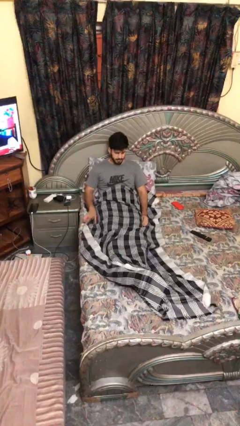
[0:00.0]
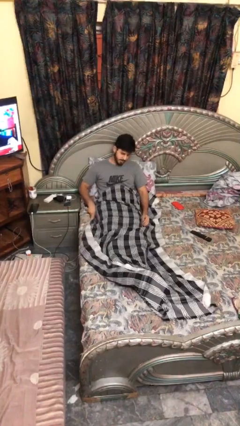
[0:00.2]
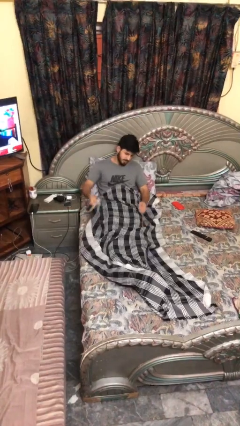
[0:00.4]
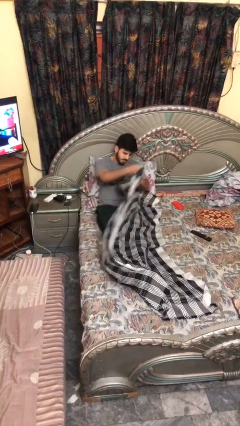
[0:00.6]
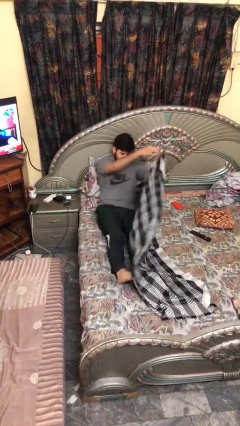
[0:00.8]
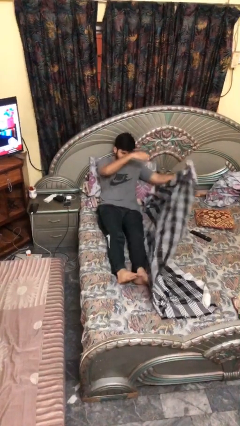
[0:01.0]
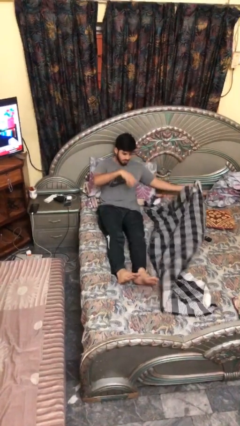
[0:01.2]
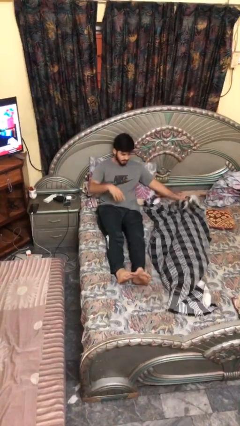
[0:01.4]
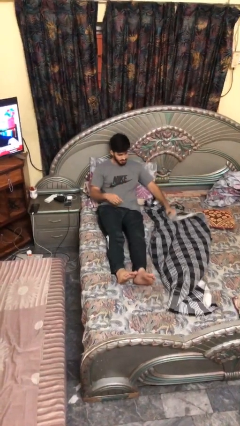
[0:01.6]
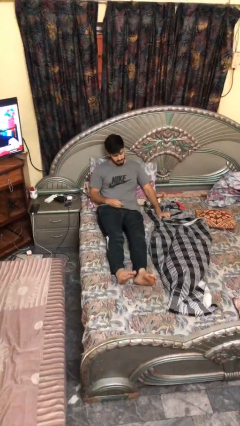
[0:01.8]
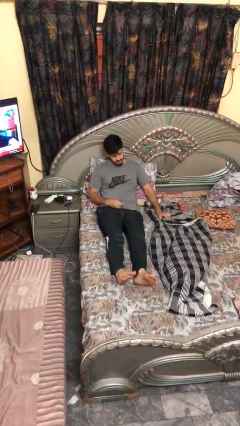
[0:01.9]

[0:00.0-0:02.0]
person uncovers with bedsheets

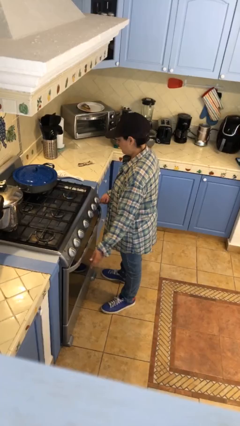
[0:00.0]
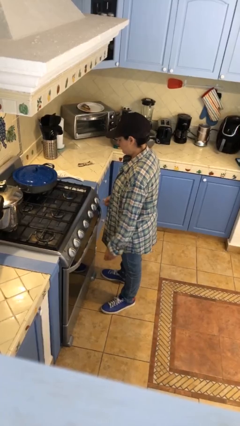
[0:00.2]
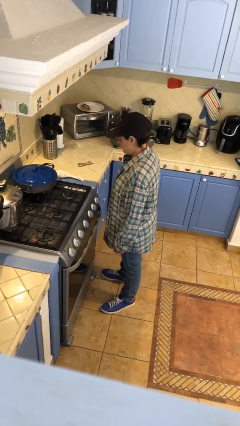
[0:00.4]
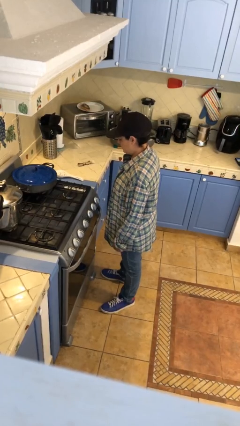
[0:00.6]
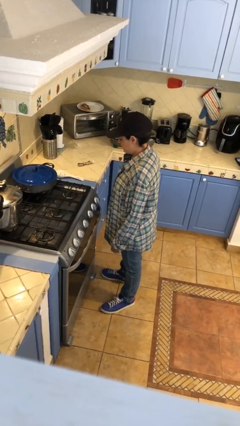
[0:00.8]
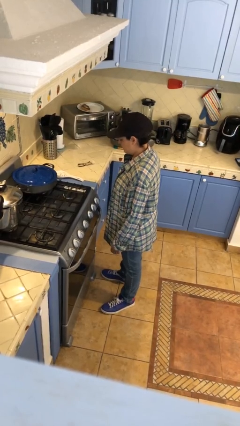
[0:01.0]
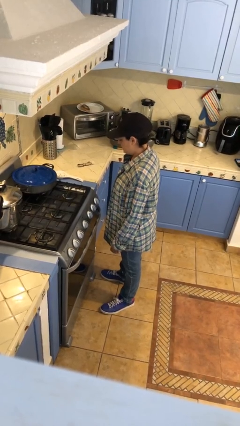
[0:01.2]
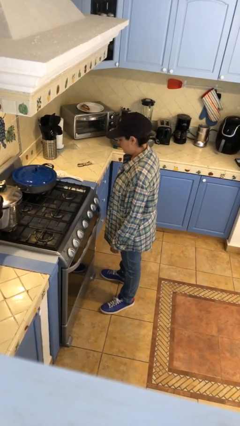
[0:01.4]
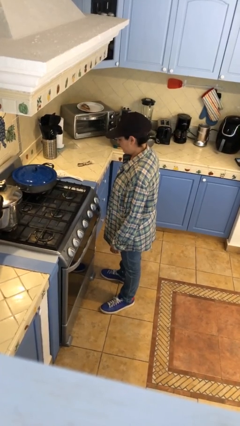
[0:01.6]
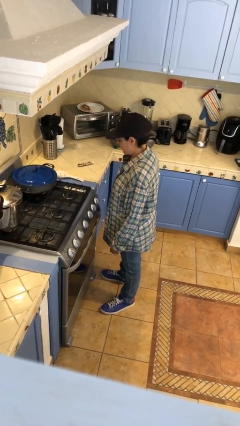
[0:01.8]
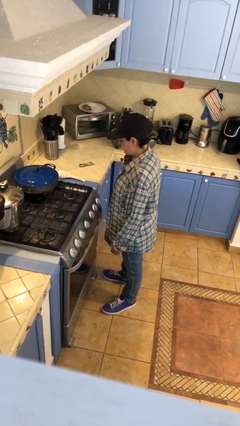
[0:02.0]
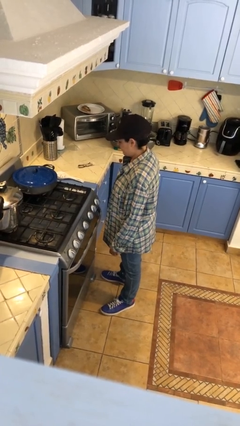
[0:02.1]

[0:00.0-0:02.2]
person turns off stovetop

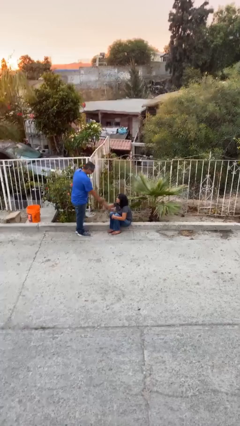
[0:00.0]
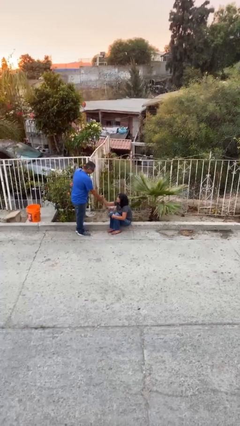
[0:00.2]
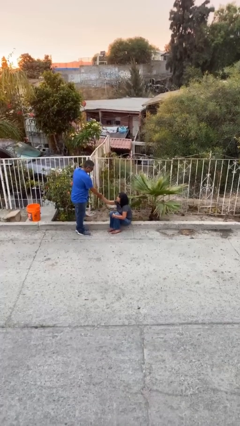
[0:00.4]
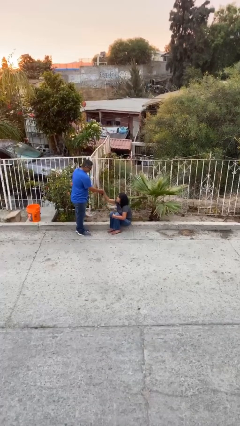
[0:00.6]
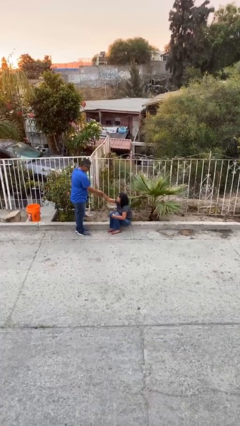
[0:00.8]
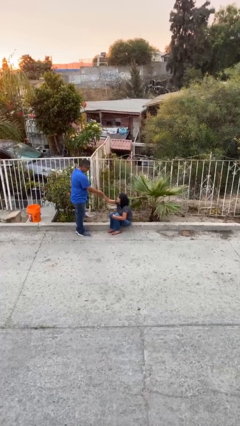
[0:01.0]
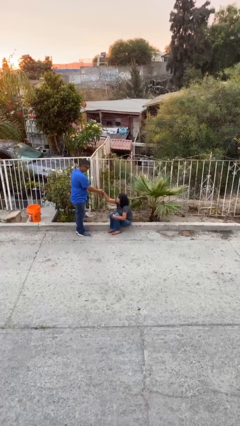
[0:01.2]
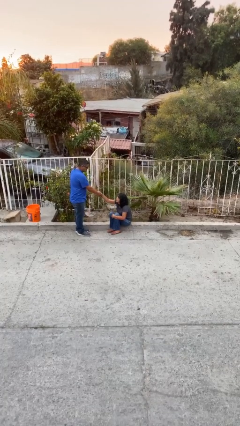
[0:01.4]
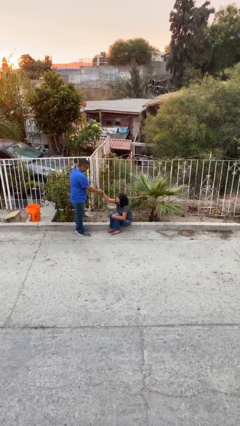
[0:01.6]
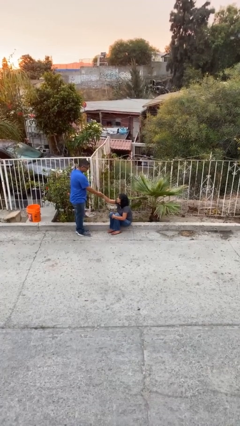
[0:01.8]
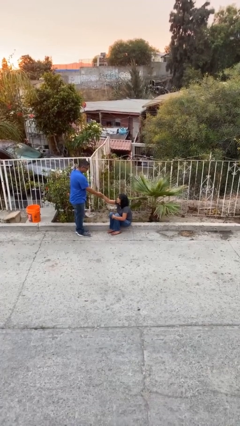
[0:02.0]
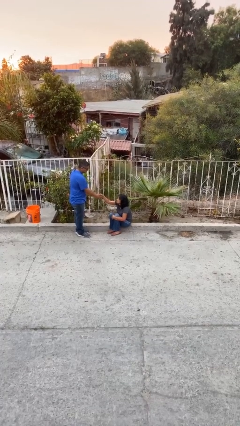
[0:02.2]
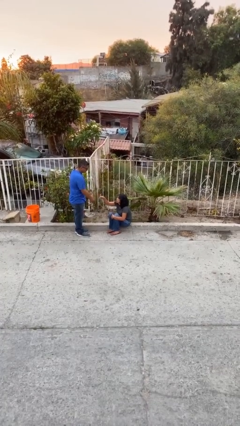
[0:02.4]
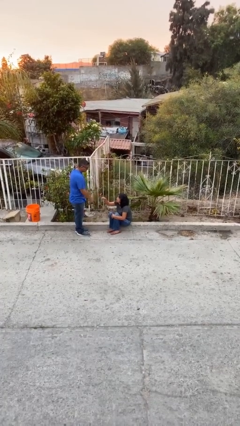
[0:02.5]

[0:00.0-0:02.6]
person shakes hand

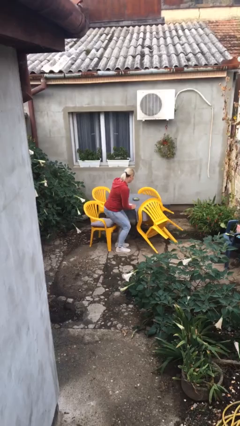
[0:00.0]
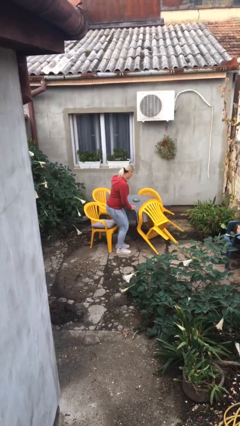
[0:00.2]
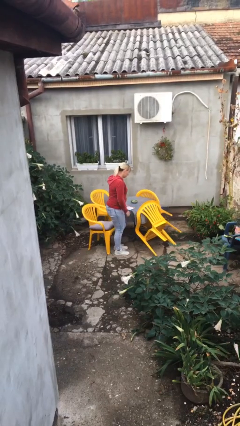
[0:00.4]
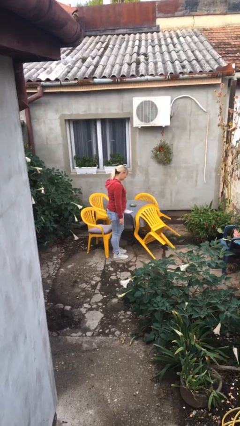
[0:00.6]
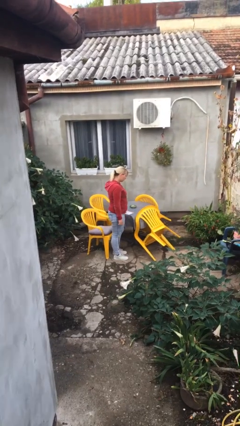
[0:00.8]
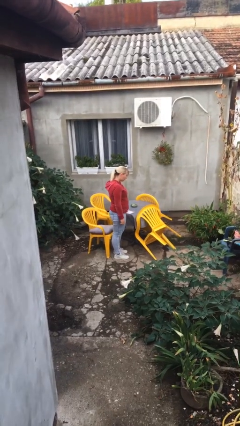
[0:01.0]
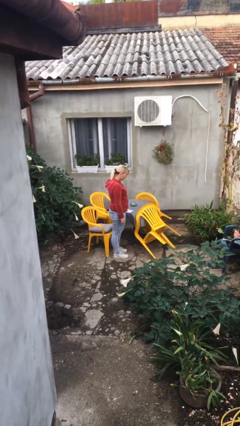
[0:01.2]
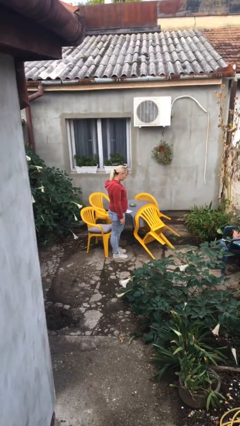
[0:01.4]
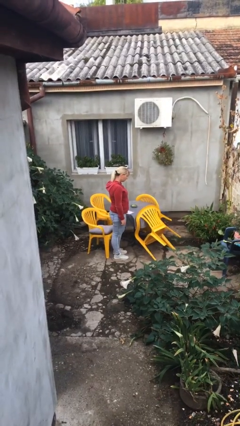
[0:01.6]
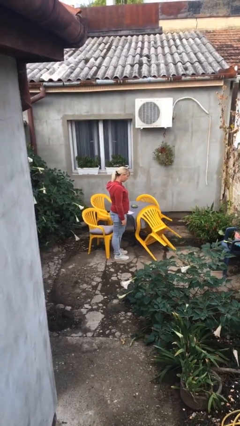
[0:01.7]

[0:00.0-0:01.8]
person stands up

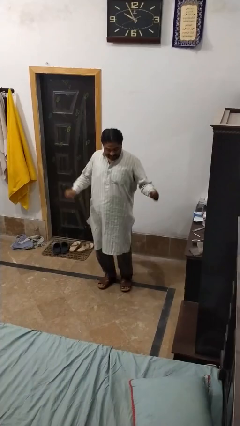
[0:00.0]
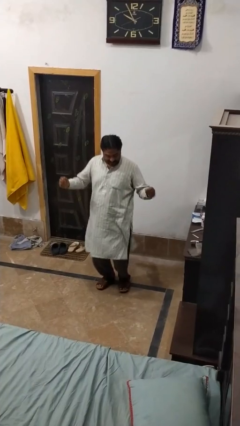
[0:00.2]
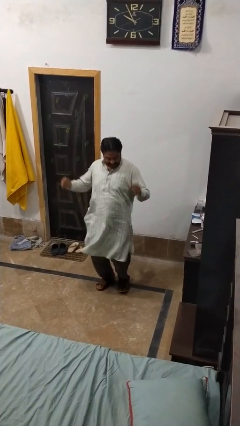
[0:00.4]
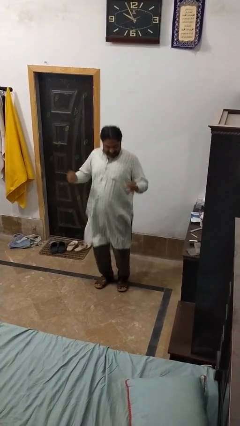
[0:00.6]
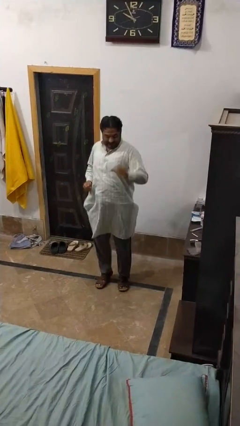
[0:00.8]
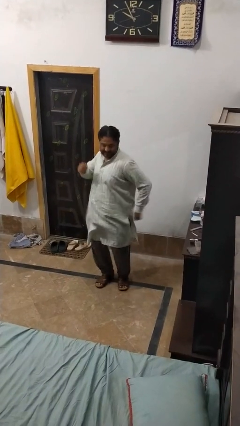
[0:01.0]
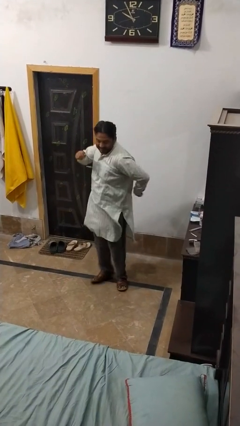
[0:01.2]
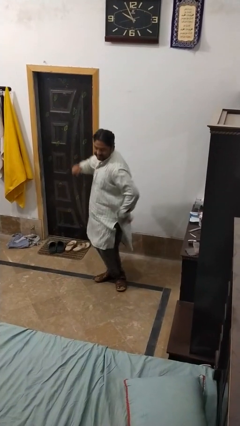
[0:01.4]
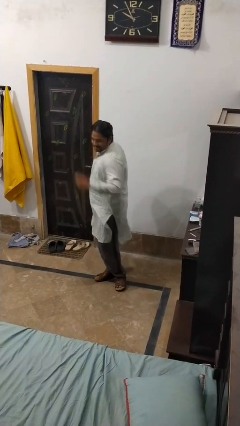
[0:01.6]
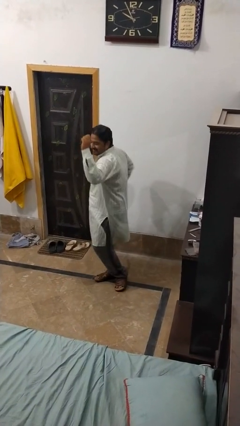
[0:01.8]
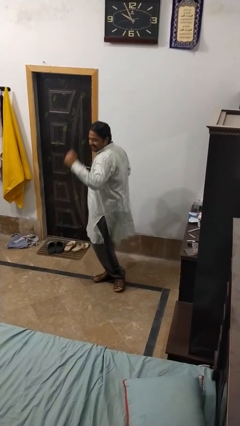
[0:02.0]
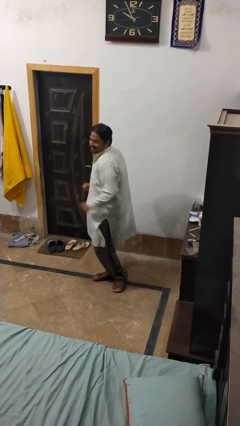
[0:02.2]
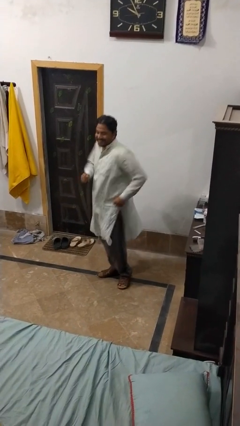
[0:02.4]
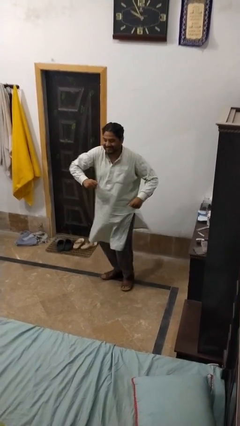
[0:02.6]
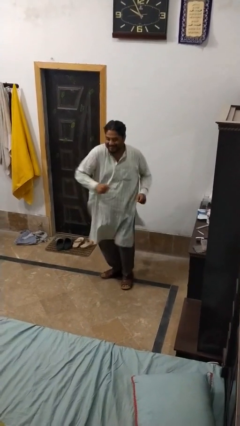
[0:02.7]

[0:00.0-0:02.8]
person dances in place

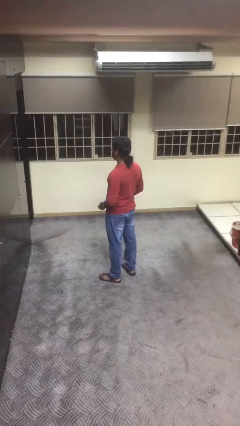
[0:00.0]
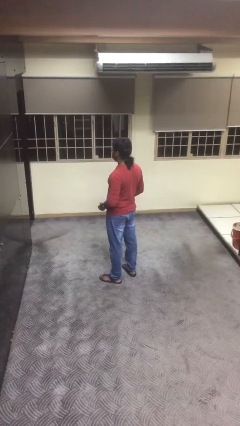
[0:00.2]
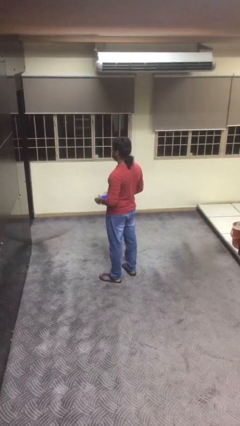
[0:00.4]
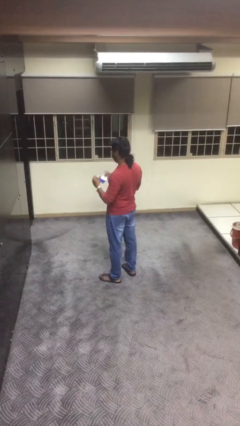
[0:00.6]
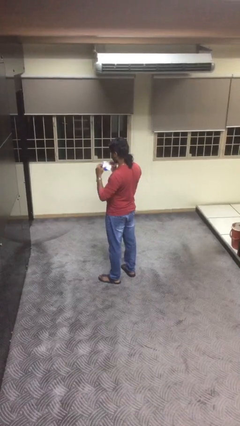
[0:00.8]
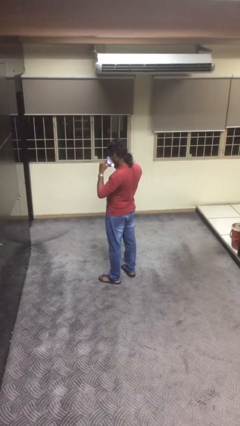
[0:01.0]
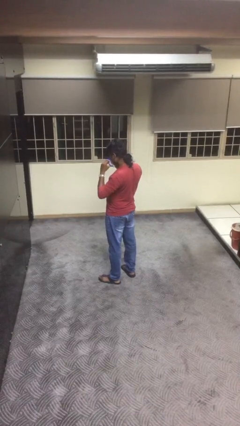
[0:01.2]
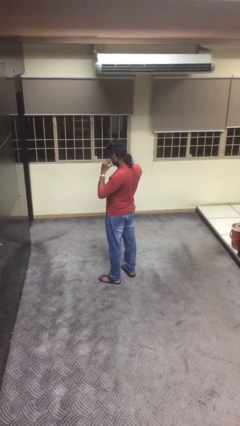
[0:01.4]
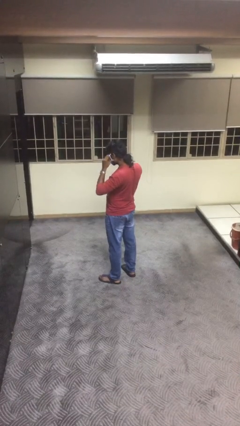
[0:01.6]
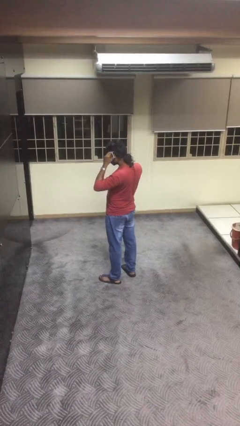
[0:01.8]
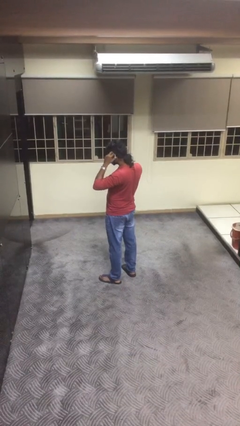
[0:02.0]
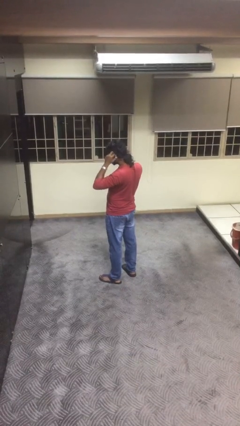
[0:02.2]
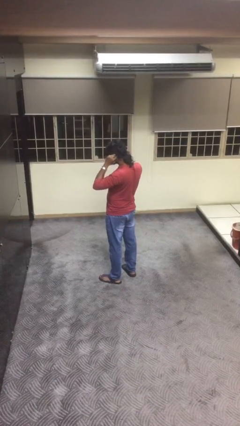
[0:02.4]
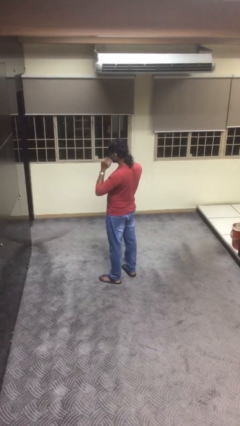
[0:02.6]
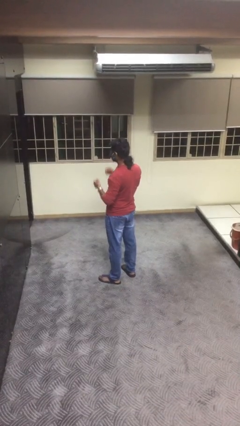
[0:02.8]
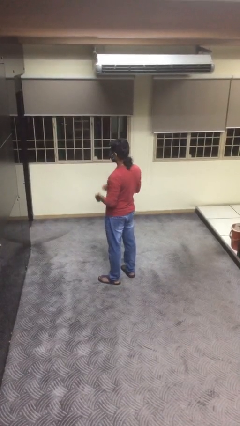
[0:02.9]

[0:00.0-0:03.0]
person puts on facemask

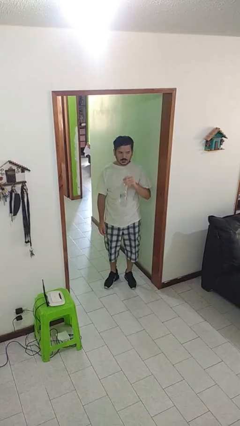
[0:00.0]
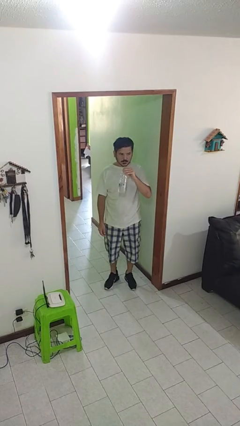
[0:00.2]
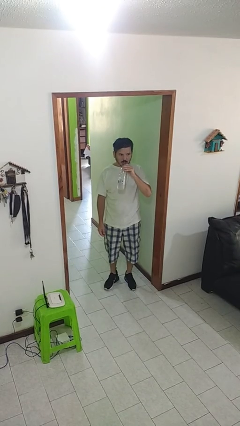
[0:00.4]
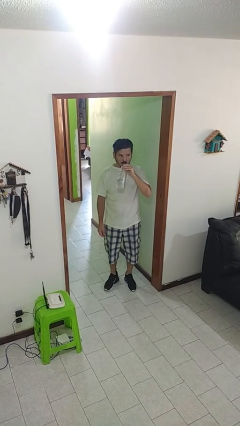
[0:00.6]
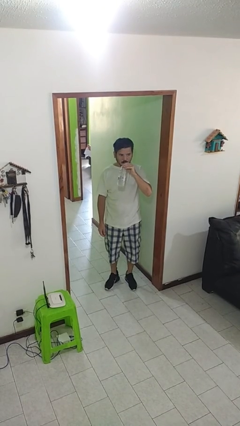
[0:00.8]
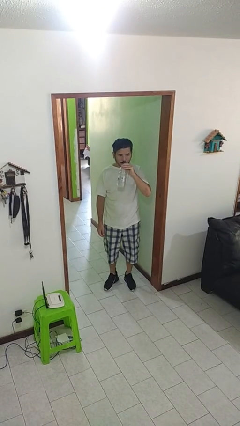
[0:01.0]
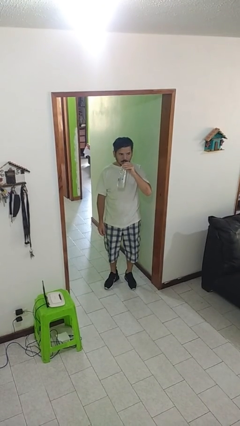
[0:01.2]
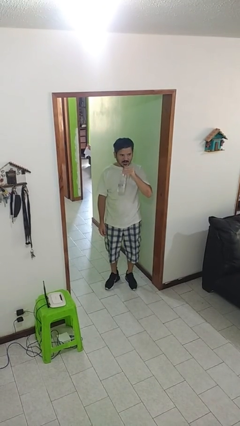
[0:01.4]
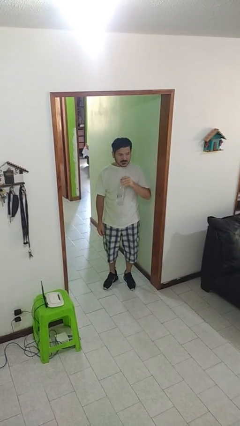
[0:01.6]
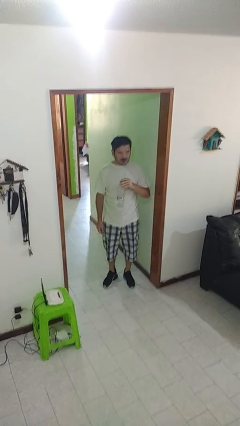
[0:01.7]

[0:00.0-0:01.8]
person drinks from straw

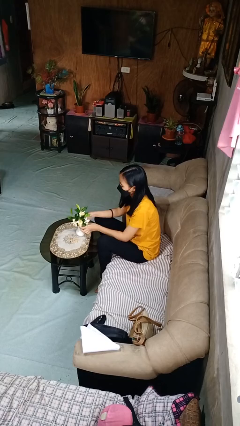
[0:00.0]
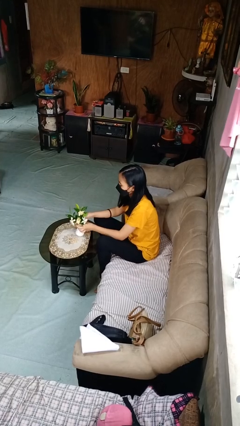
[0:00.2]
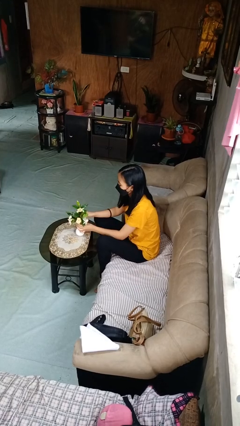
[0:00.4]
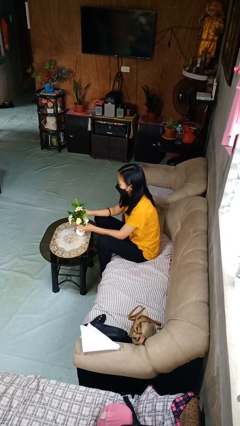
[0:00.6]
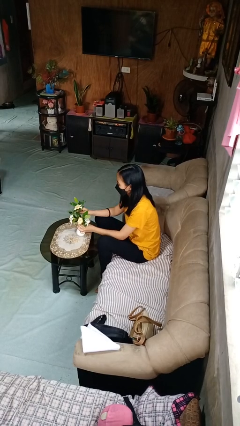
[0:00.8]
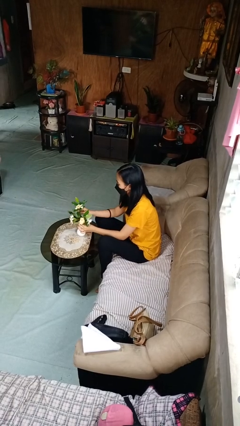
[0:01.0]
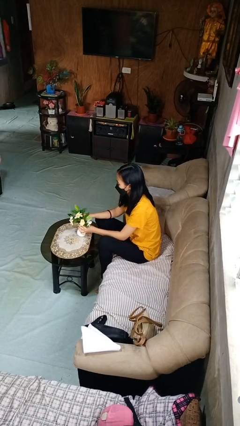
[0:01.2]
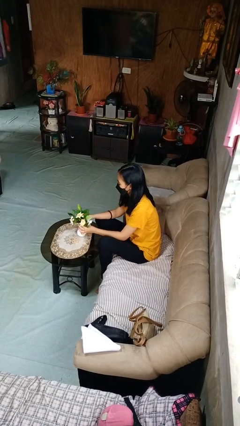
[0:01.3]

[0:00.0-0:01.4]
person arranges flowers in vase
